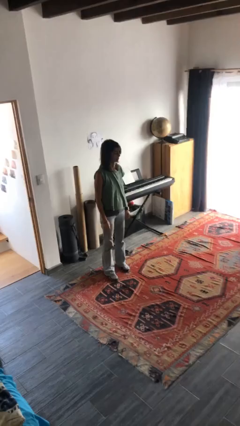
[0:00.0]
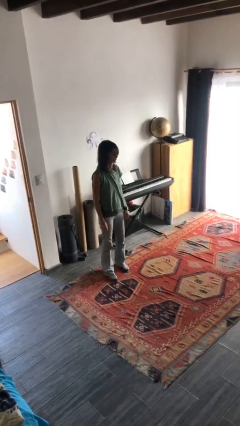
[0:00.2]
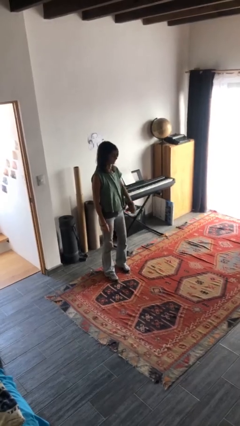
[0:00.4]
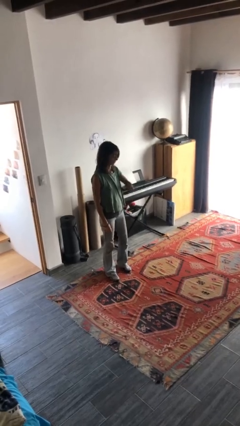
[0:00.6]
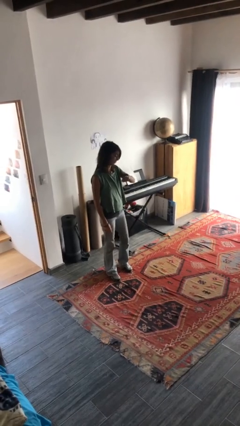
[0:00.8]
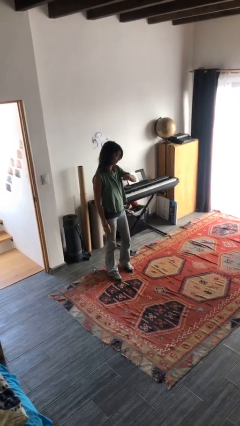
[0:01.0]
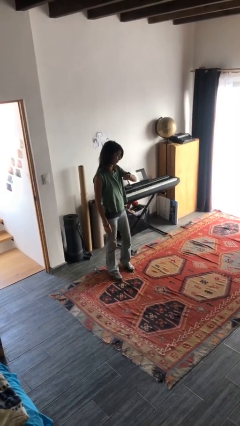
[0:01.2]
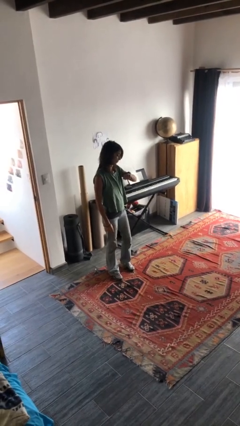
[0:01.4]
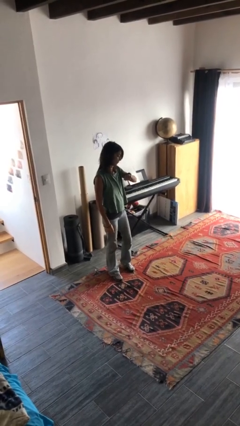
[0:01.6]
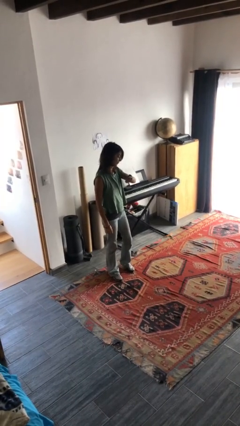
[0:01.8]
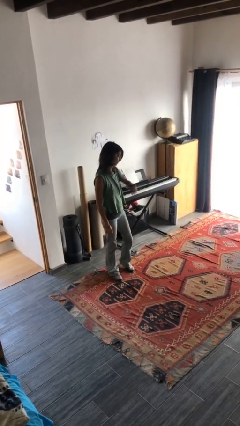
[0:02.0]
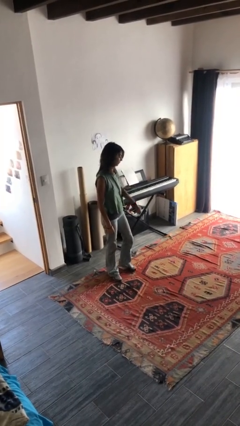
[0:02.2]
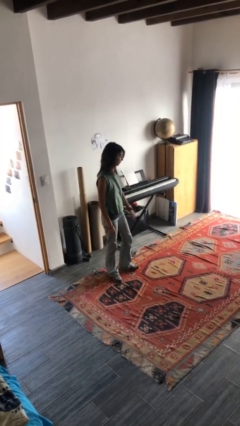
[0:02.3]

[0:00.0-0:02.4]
person looks at wristwatch

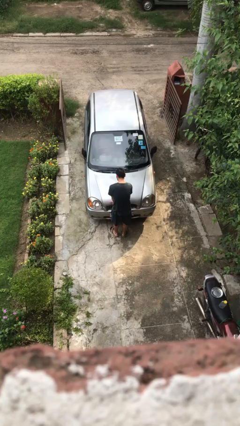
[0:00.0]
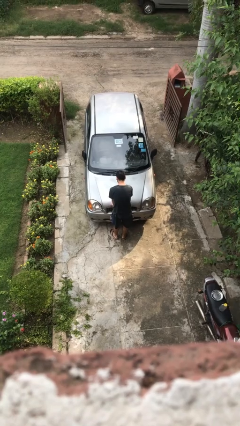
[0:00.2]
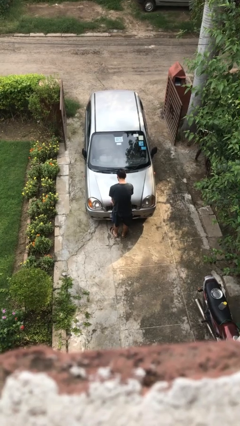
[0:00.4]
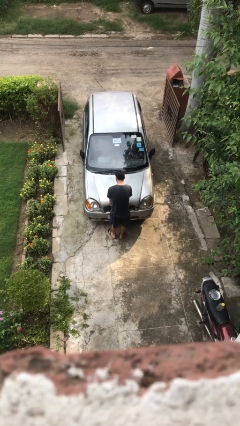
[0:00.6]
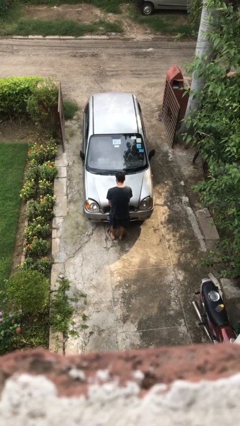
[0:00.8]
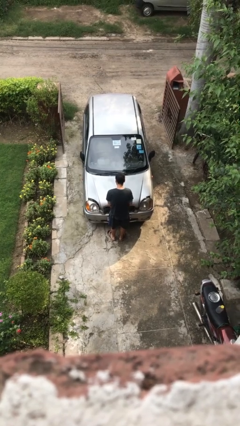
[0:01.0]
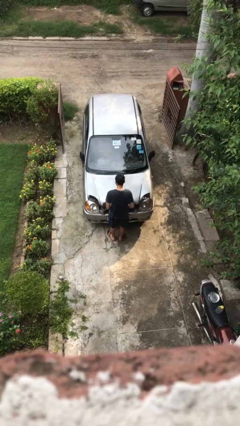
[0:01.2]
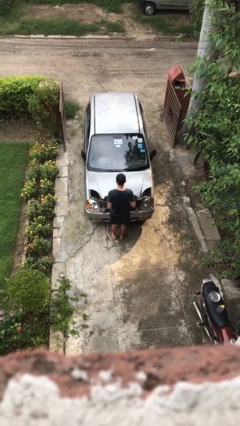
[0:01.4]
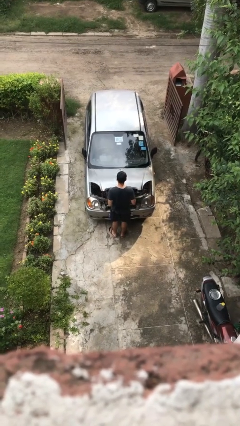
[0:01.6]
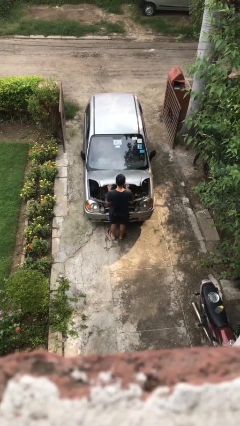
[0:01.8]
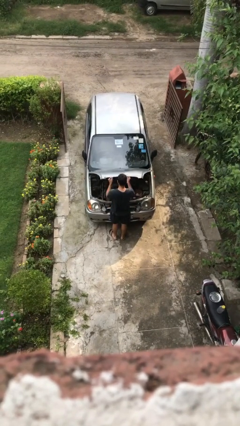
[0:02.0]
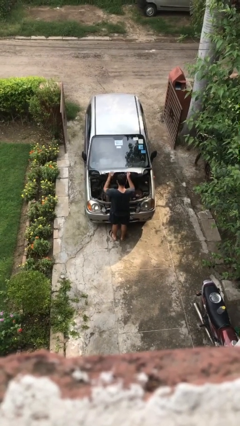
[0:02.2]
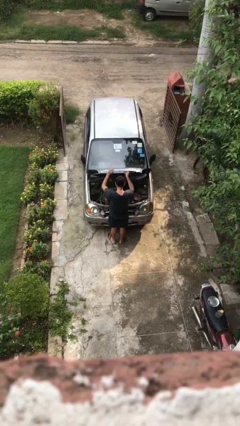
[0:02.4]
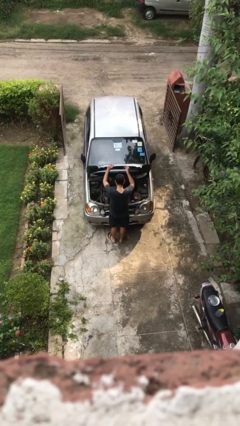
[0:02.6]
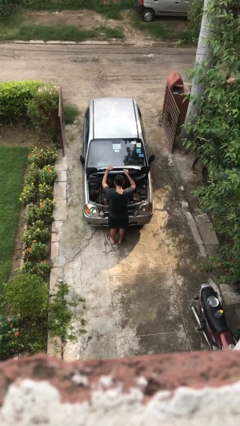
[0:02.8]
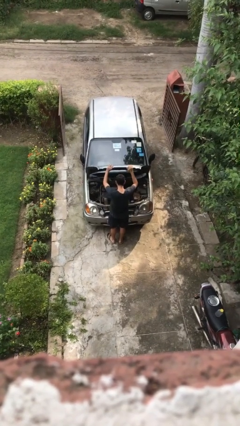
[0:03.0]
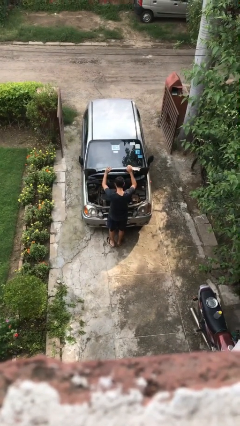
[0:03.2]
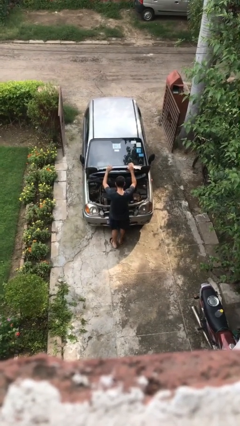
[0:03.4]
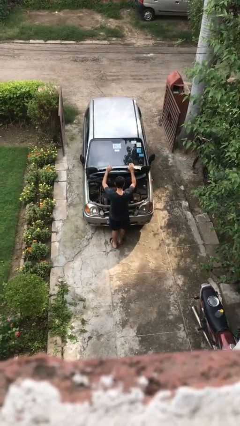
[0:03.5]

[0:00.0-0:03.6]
person opens car hood

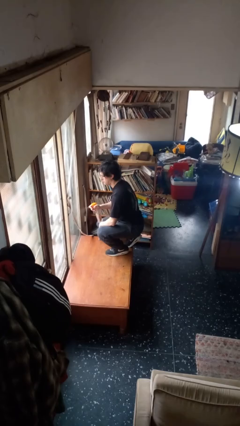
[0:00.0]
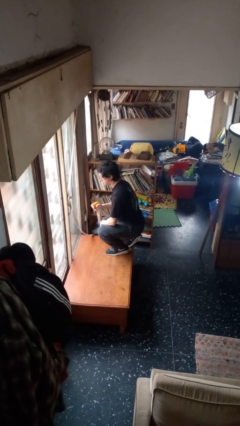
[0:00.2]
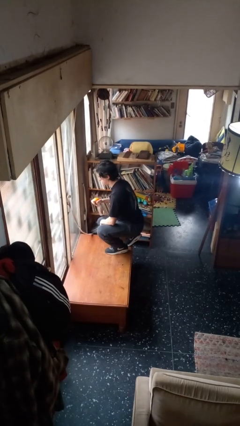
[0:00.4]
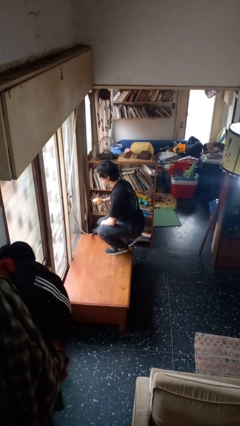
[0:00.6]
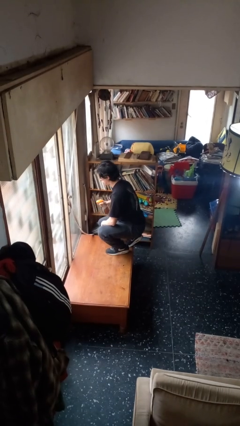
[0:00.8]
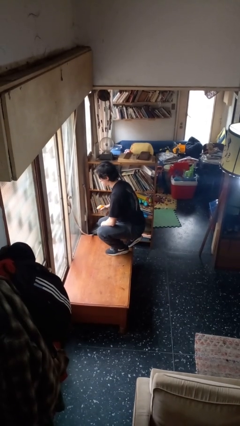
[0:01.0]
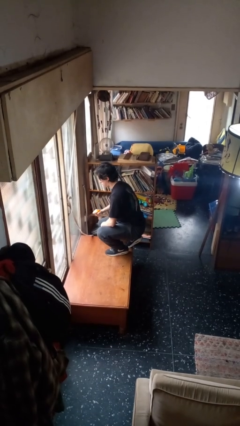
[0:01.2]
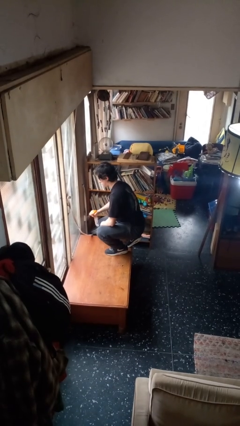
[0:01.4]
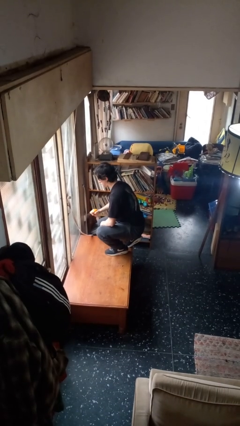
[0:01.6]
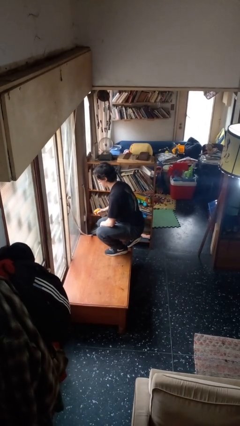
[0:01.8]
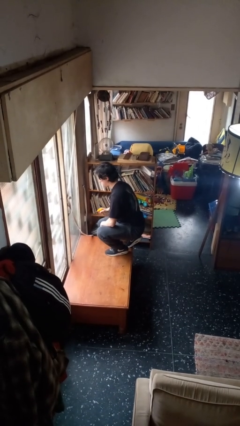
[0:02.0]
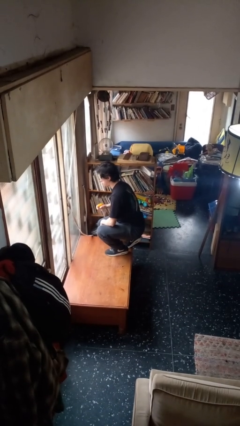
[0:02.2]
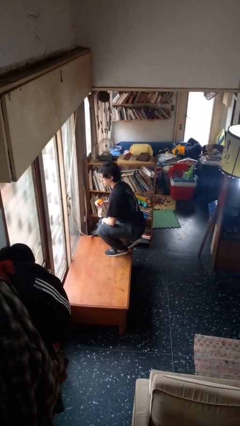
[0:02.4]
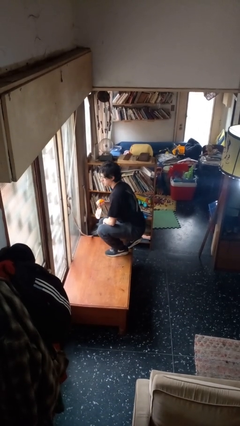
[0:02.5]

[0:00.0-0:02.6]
person sprays from bottle

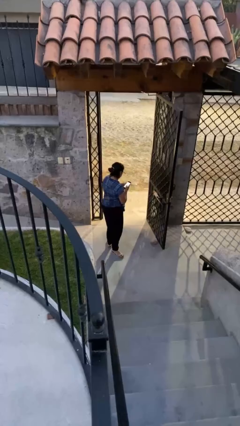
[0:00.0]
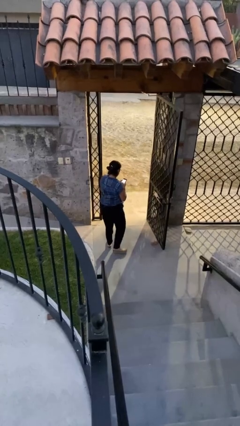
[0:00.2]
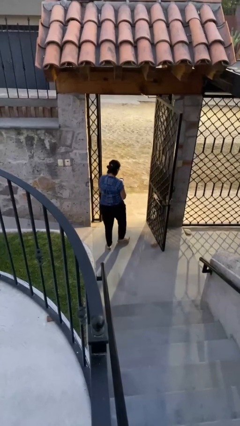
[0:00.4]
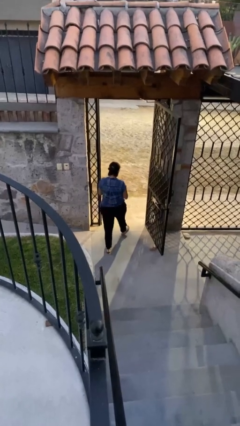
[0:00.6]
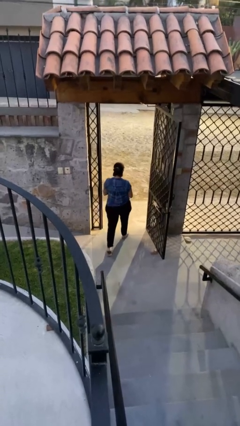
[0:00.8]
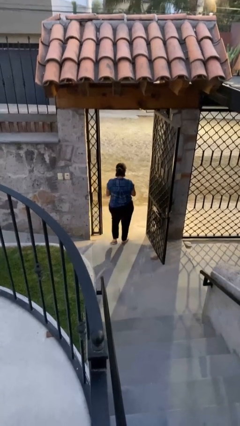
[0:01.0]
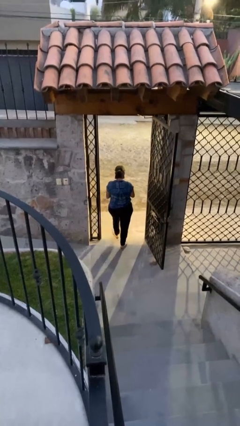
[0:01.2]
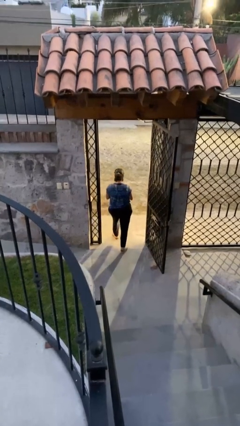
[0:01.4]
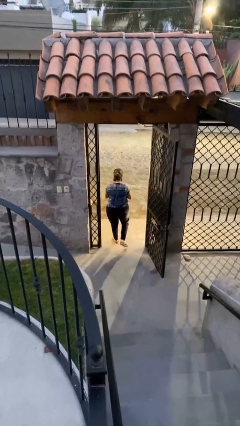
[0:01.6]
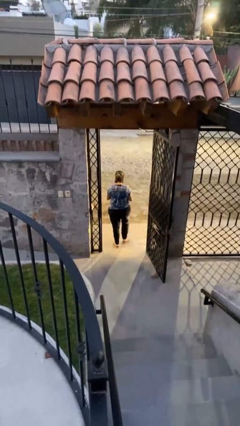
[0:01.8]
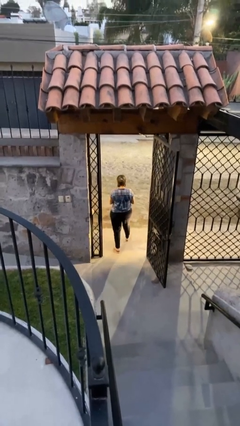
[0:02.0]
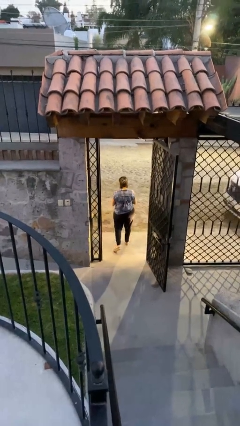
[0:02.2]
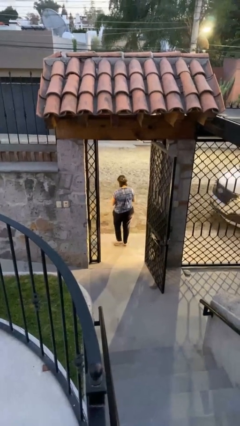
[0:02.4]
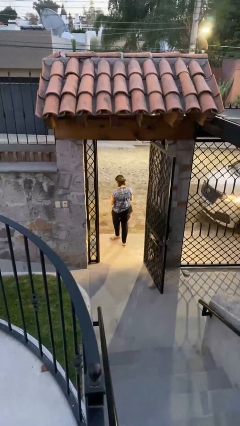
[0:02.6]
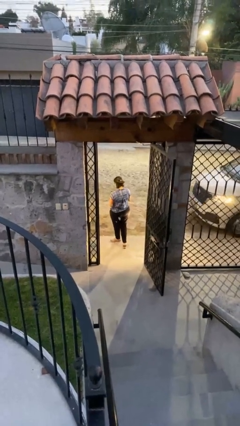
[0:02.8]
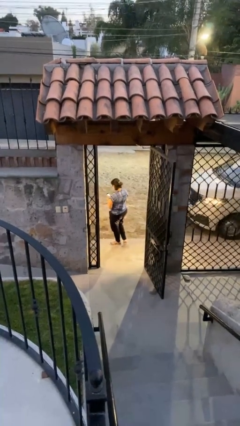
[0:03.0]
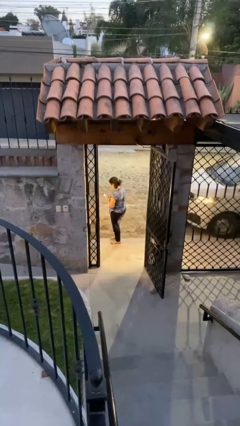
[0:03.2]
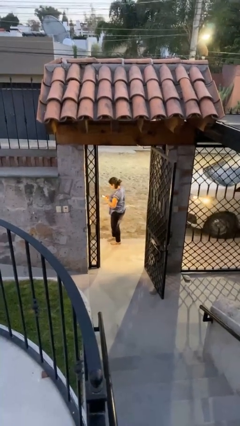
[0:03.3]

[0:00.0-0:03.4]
person exits scene through structure

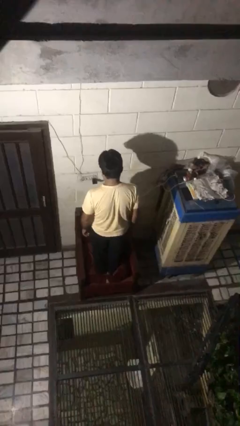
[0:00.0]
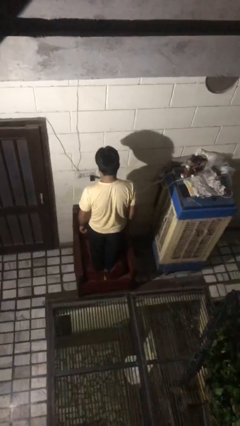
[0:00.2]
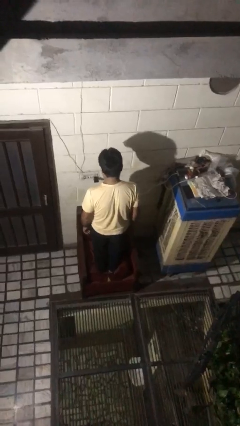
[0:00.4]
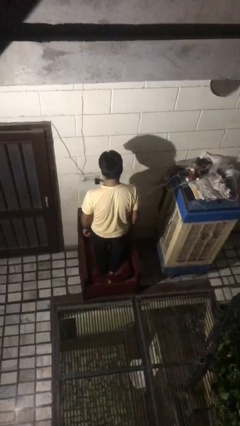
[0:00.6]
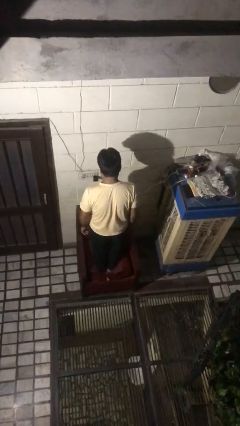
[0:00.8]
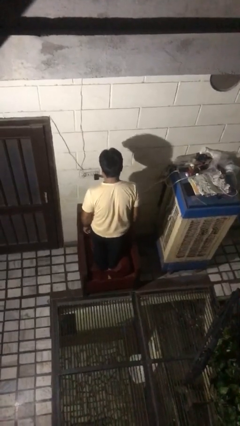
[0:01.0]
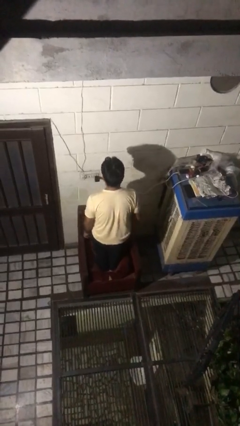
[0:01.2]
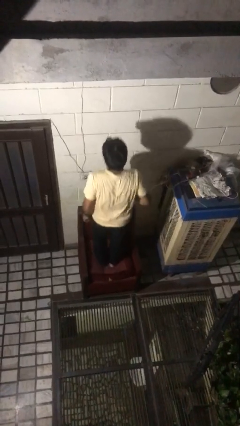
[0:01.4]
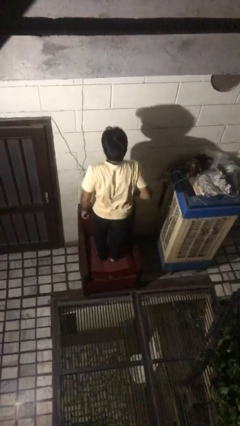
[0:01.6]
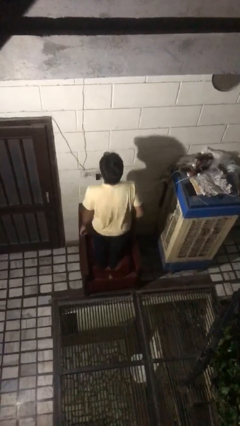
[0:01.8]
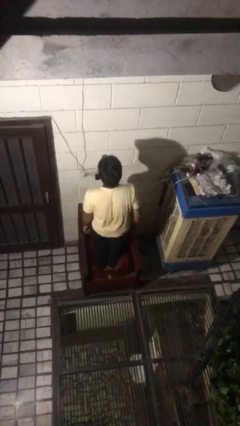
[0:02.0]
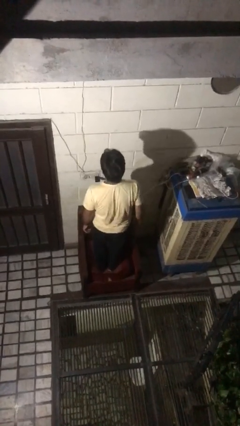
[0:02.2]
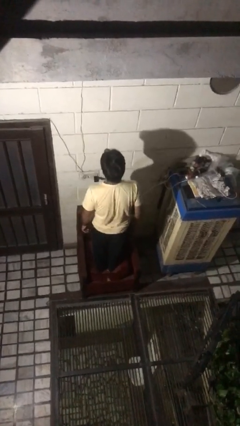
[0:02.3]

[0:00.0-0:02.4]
person jumps on couch

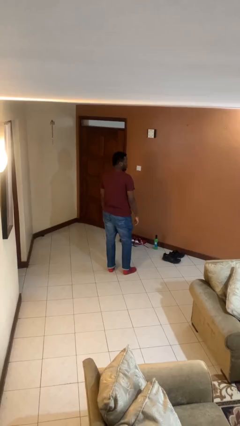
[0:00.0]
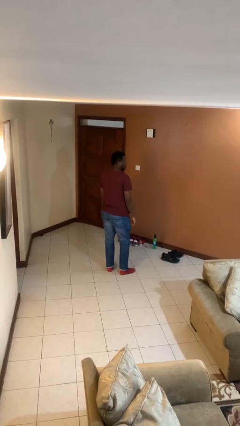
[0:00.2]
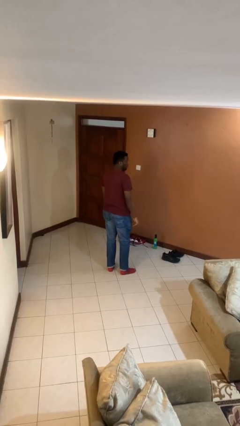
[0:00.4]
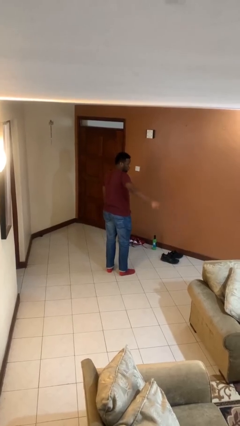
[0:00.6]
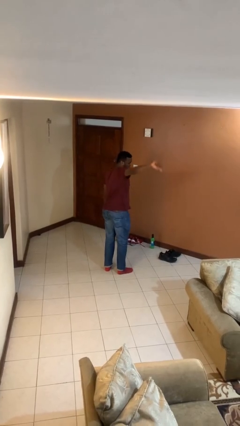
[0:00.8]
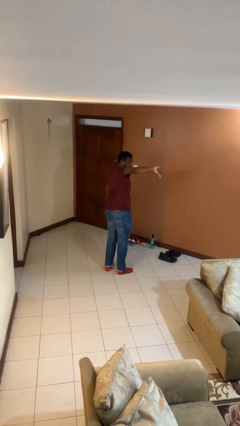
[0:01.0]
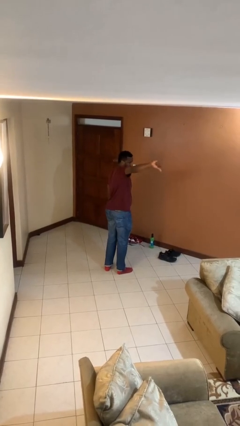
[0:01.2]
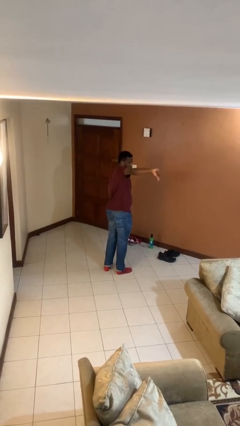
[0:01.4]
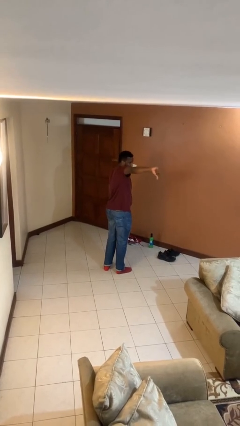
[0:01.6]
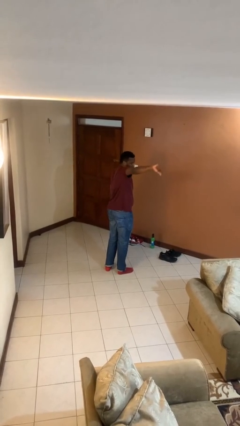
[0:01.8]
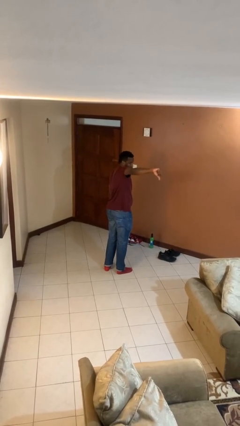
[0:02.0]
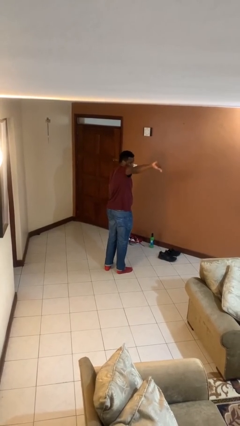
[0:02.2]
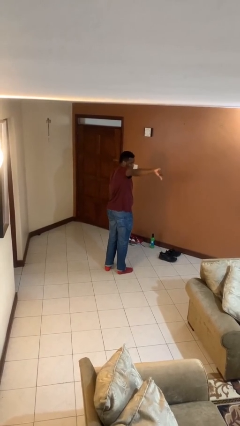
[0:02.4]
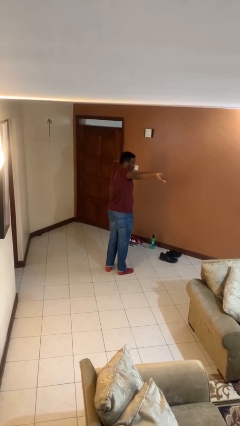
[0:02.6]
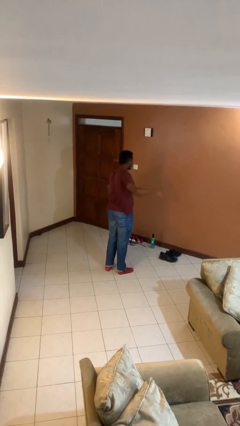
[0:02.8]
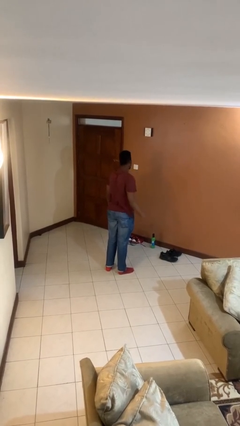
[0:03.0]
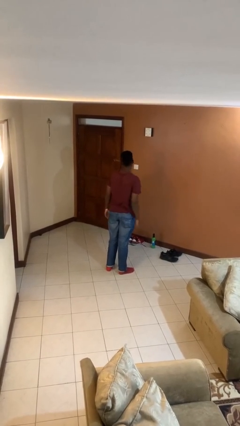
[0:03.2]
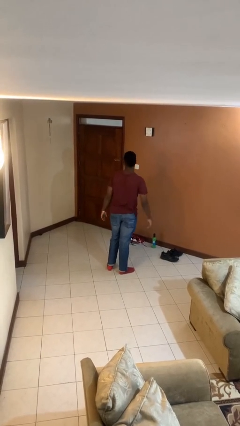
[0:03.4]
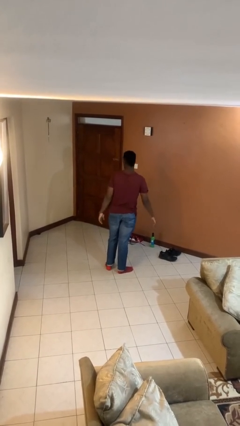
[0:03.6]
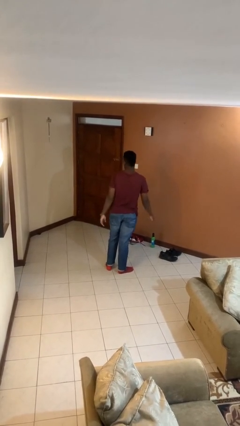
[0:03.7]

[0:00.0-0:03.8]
person gestures thumbs down
